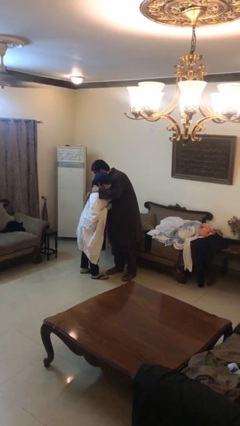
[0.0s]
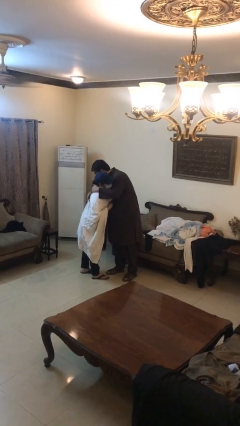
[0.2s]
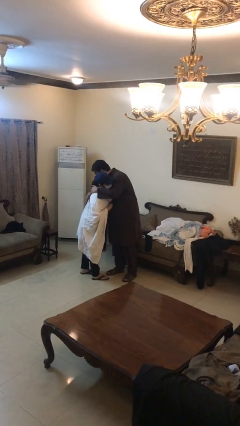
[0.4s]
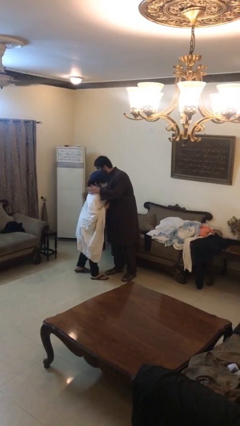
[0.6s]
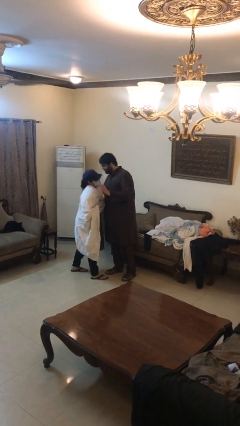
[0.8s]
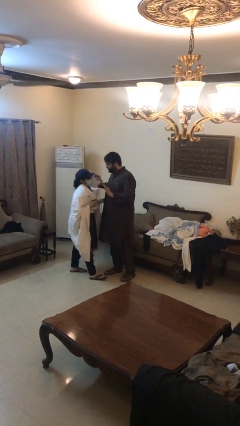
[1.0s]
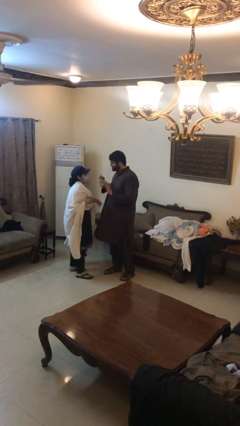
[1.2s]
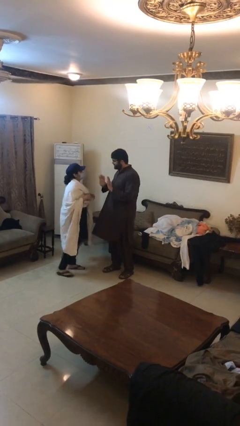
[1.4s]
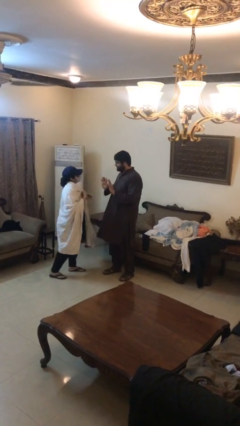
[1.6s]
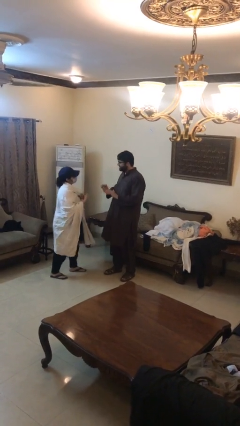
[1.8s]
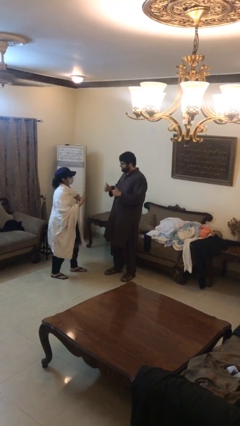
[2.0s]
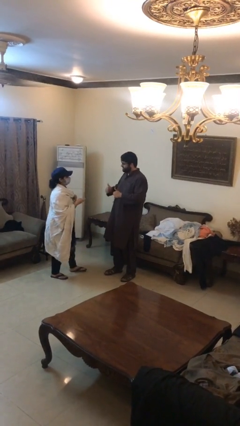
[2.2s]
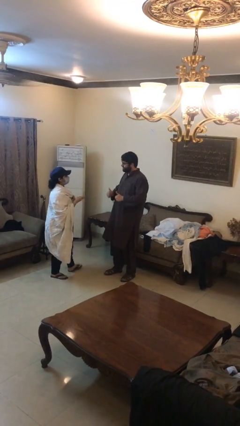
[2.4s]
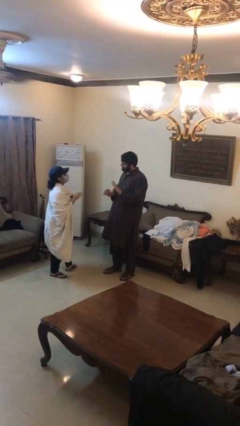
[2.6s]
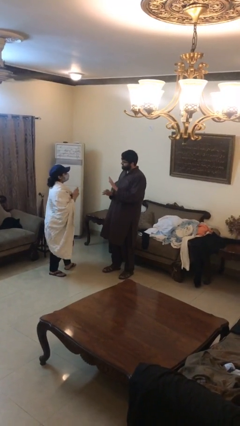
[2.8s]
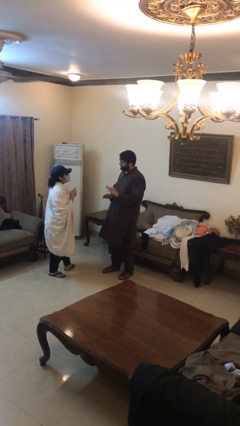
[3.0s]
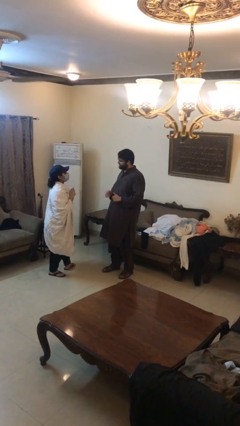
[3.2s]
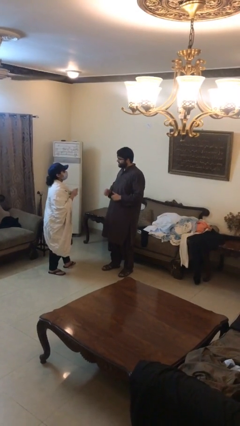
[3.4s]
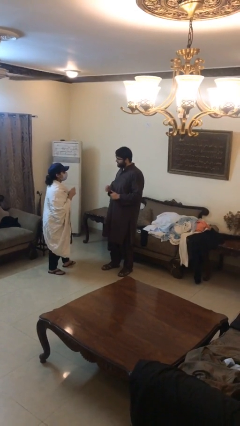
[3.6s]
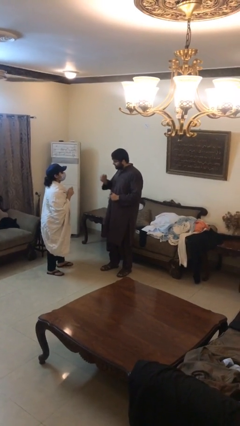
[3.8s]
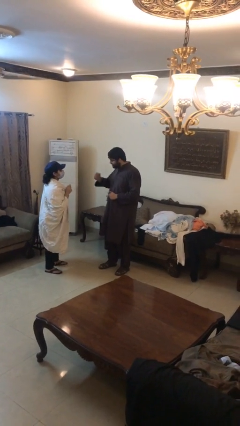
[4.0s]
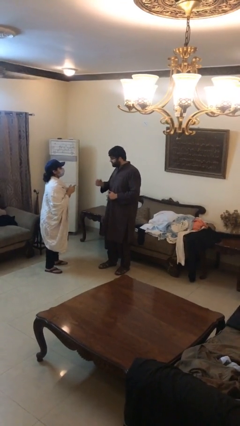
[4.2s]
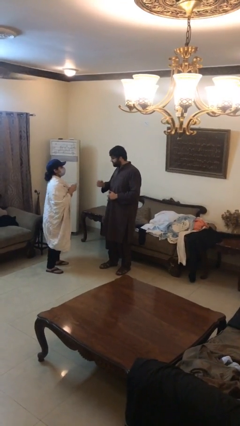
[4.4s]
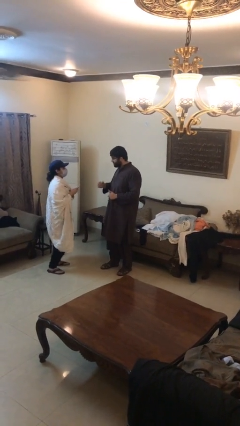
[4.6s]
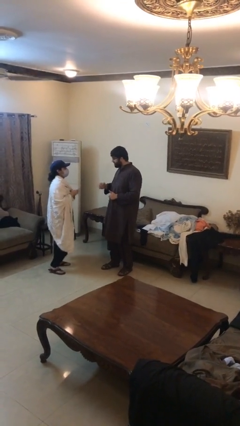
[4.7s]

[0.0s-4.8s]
person talks to person

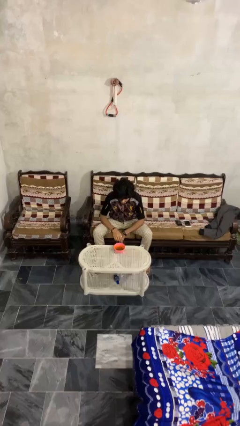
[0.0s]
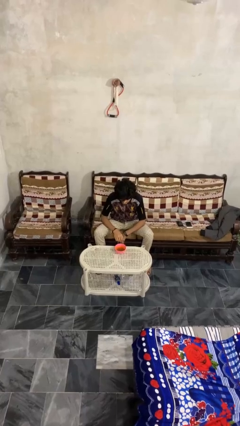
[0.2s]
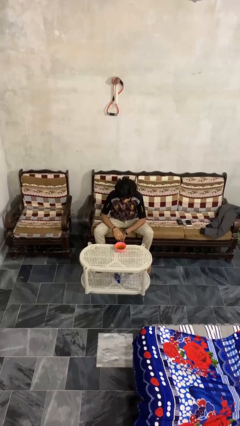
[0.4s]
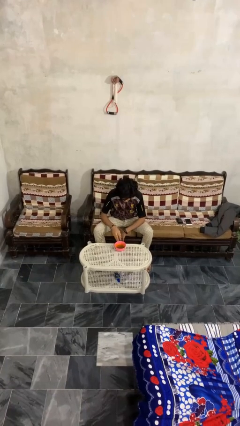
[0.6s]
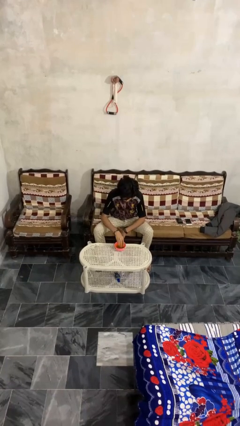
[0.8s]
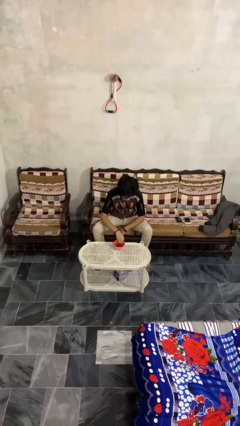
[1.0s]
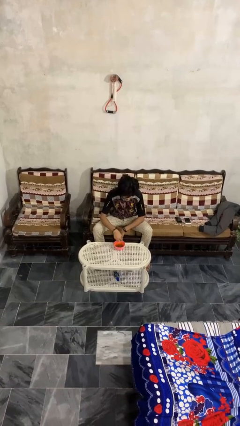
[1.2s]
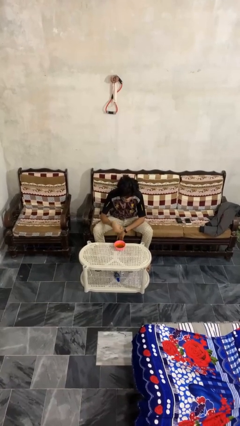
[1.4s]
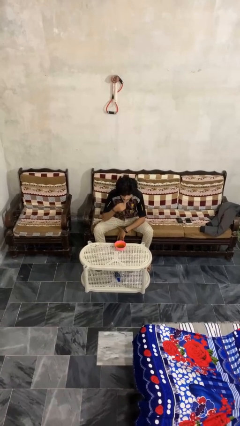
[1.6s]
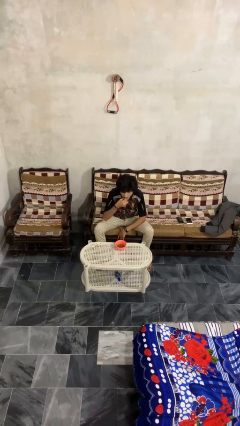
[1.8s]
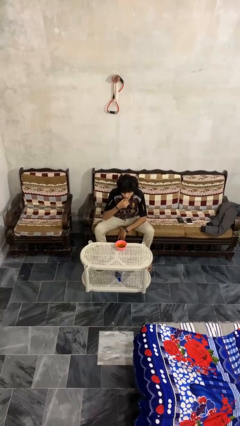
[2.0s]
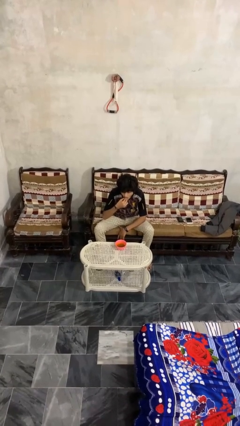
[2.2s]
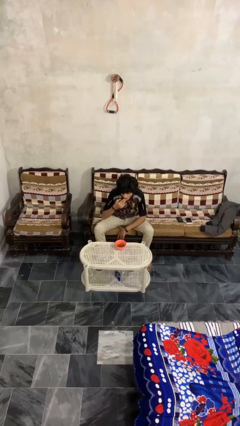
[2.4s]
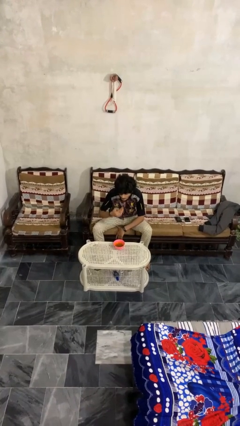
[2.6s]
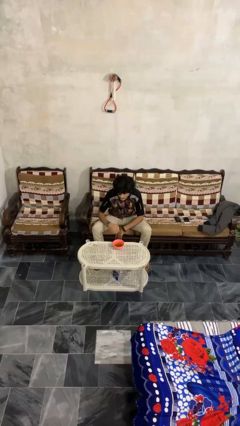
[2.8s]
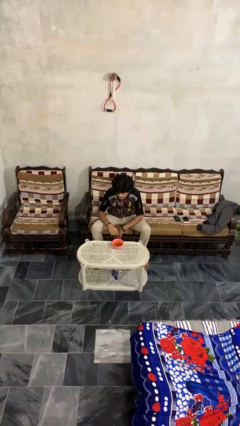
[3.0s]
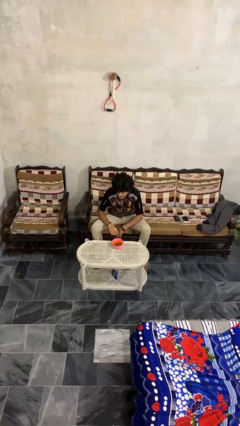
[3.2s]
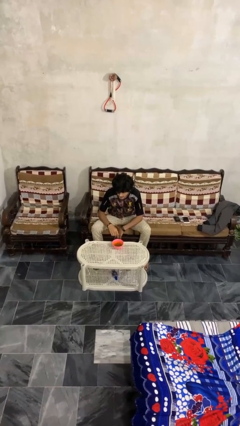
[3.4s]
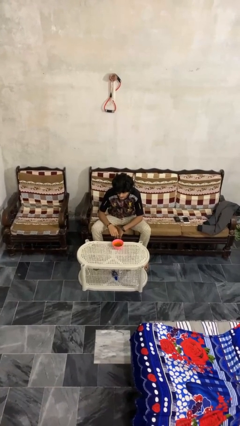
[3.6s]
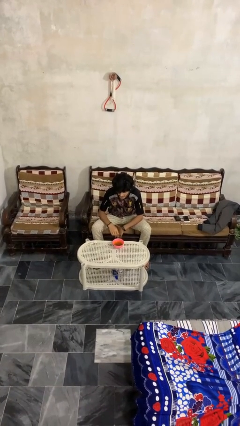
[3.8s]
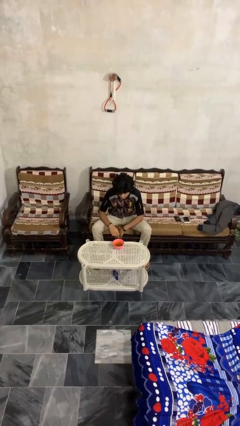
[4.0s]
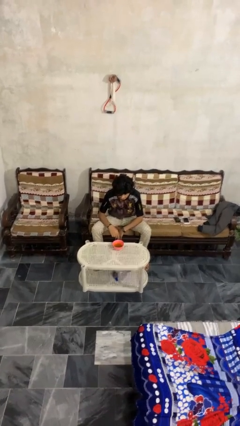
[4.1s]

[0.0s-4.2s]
person eats with hands

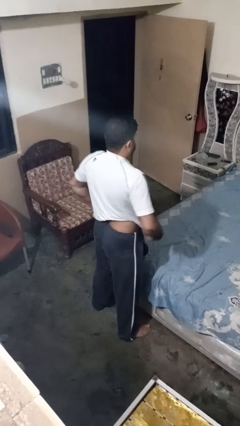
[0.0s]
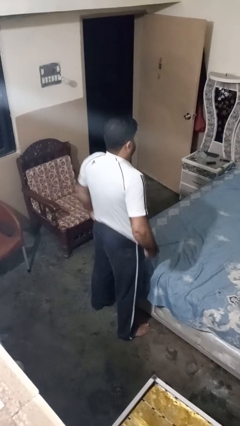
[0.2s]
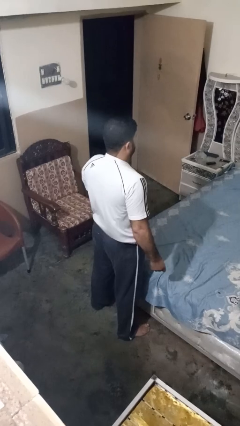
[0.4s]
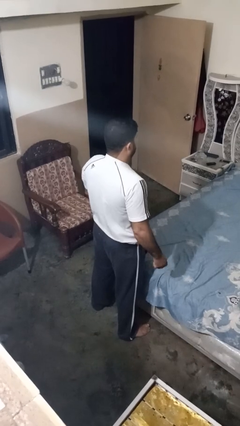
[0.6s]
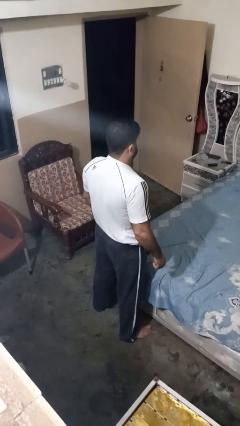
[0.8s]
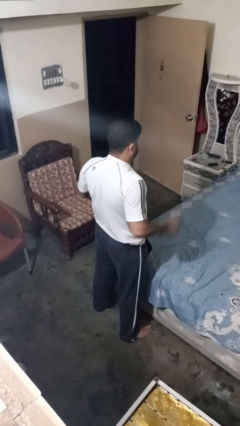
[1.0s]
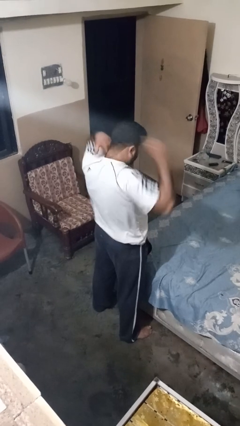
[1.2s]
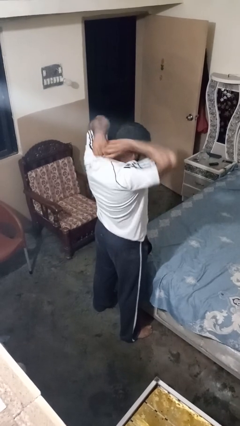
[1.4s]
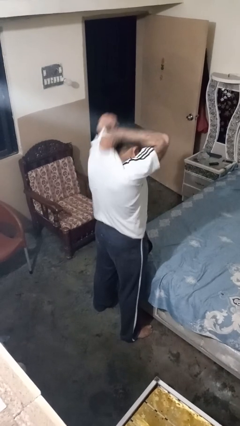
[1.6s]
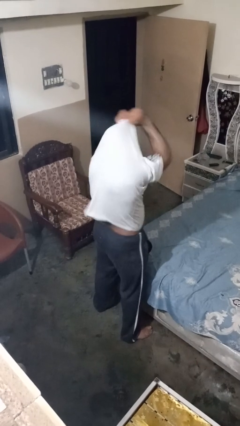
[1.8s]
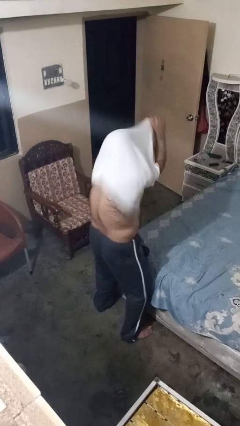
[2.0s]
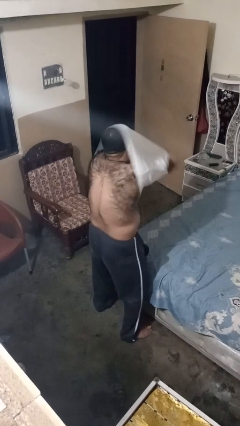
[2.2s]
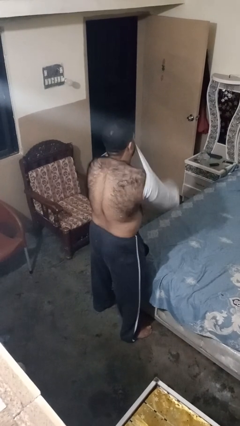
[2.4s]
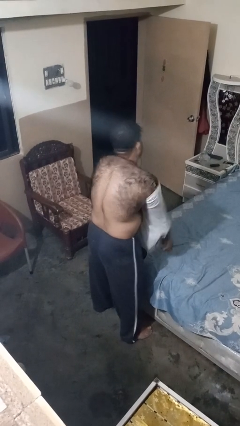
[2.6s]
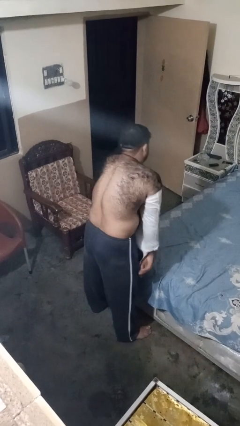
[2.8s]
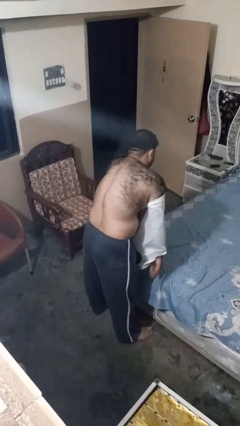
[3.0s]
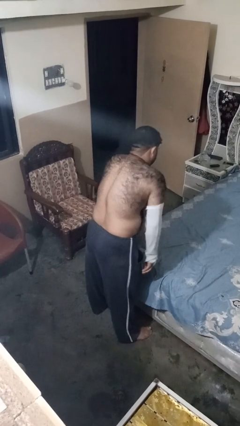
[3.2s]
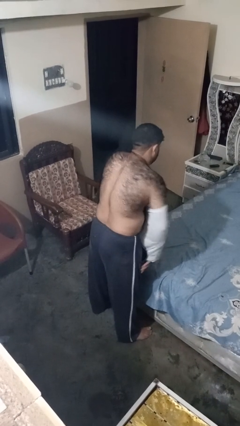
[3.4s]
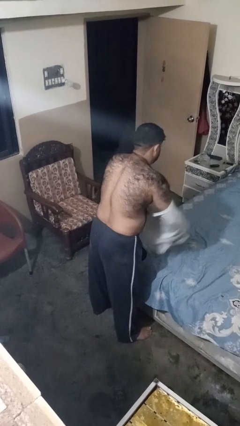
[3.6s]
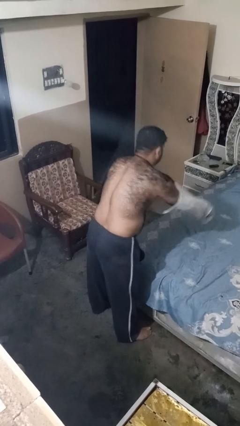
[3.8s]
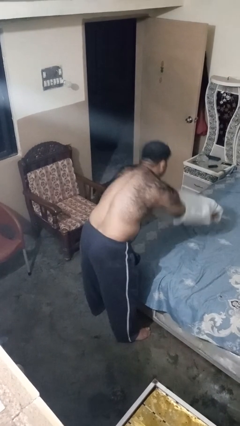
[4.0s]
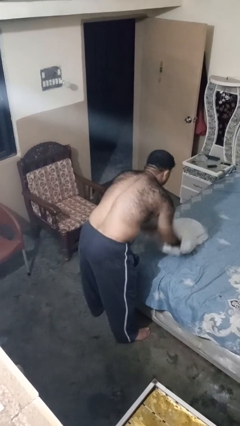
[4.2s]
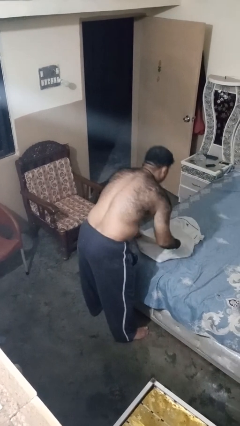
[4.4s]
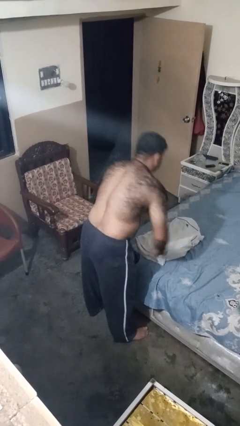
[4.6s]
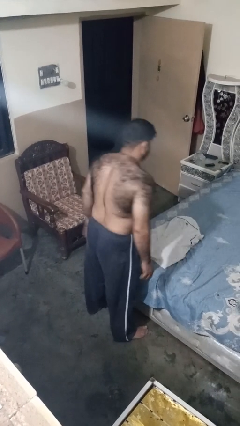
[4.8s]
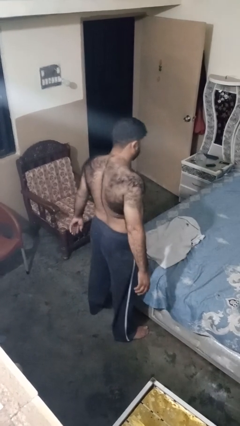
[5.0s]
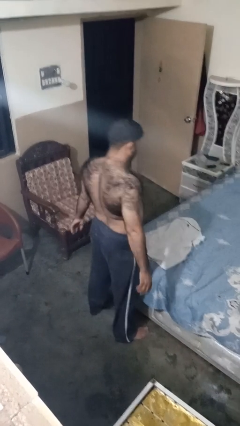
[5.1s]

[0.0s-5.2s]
person takes off shirt

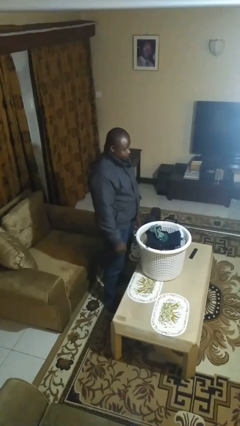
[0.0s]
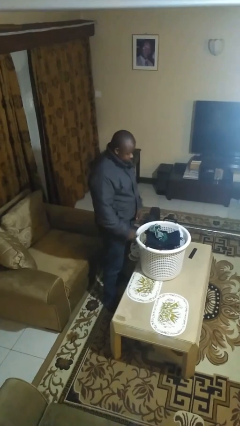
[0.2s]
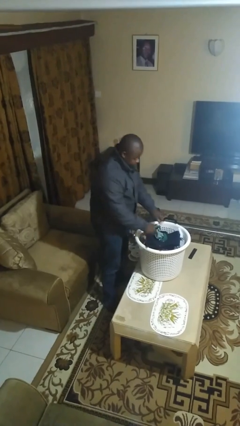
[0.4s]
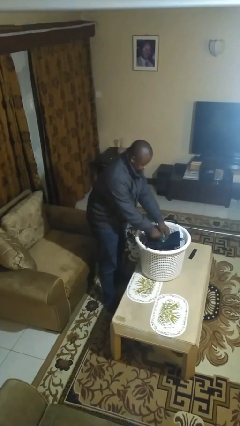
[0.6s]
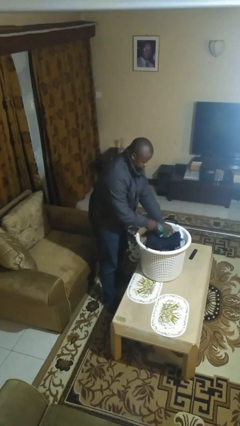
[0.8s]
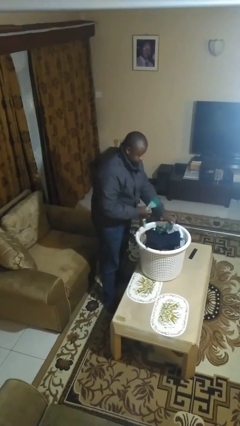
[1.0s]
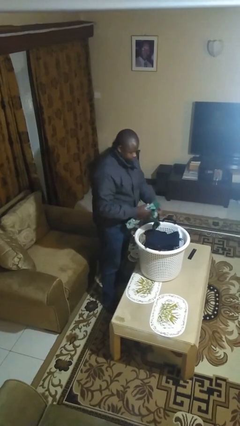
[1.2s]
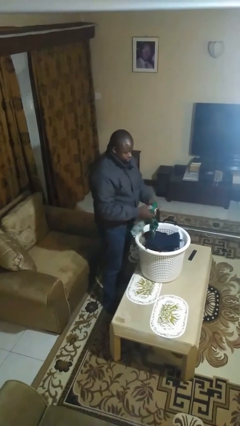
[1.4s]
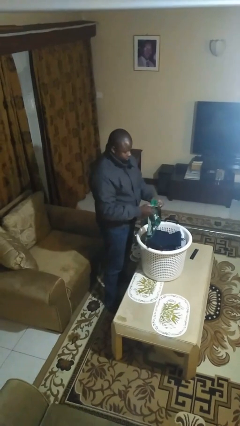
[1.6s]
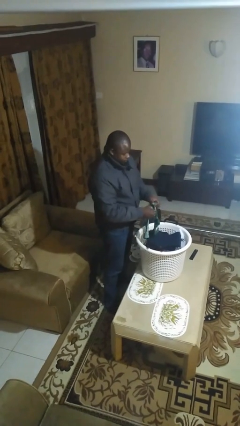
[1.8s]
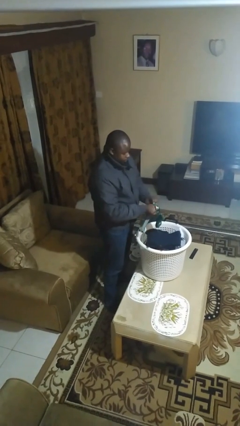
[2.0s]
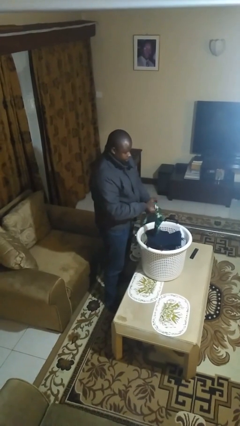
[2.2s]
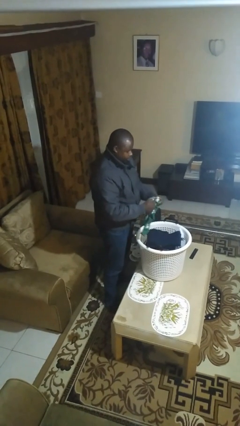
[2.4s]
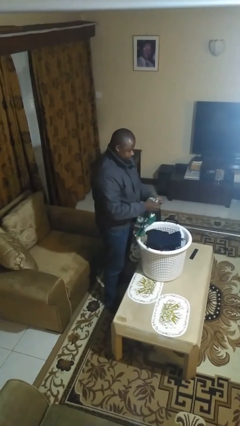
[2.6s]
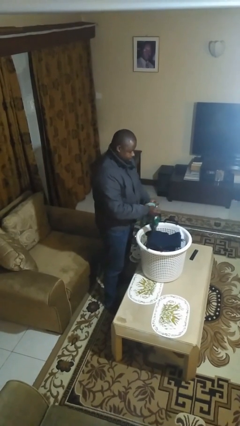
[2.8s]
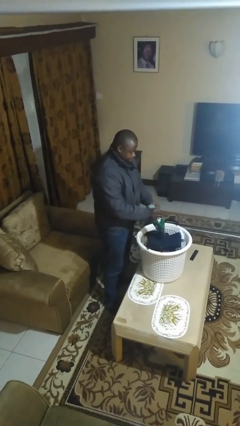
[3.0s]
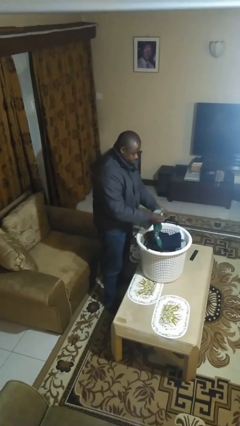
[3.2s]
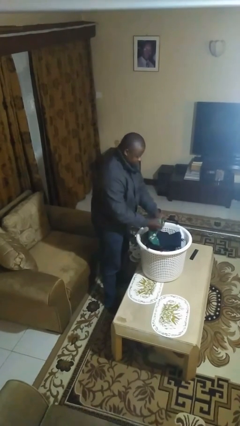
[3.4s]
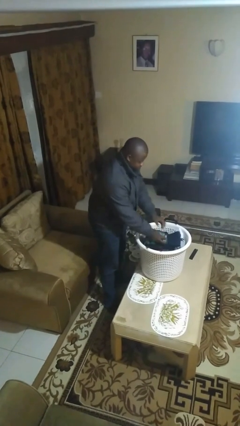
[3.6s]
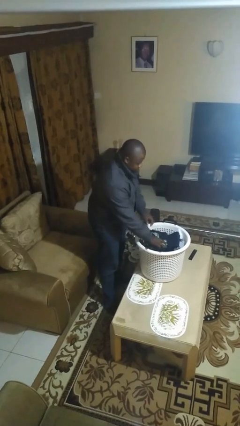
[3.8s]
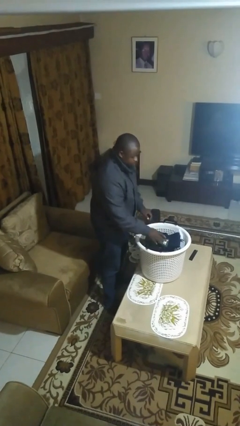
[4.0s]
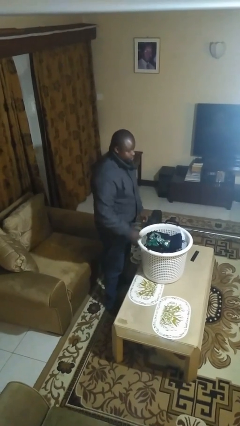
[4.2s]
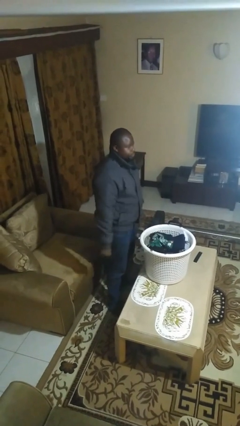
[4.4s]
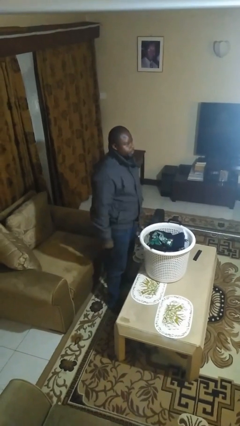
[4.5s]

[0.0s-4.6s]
person folds socks
